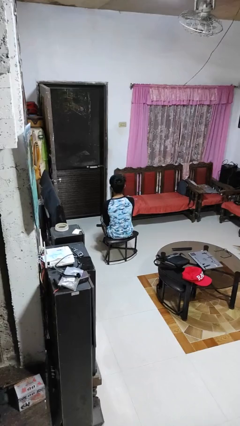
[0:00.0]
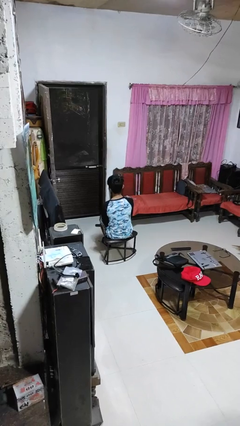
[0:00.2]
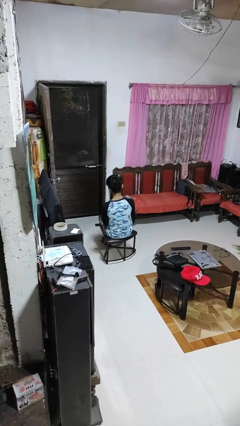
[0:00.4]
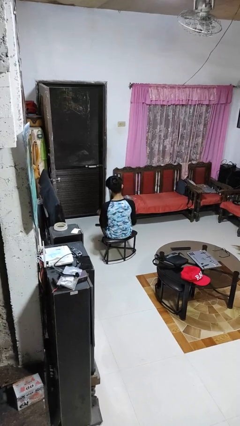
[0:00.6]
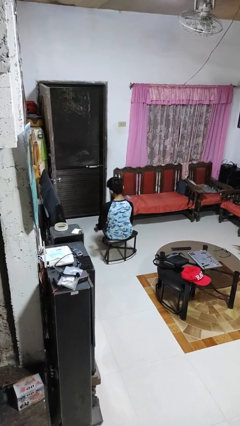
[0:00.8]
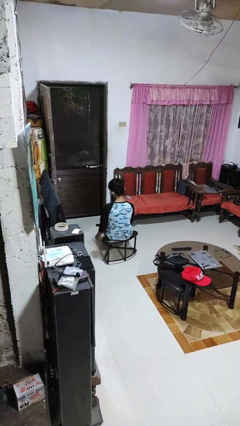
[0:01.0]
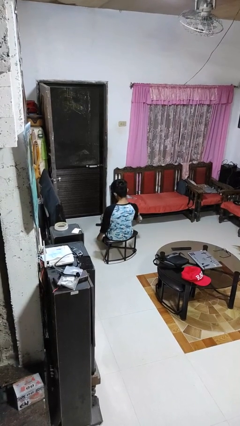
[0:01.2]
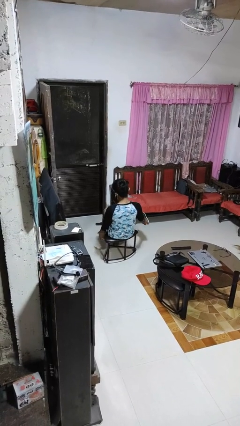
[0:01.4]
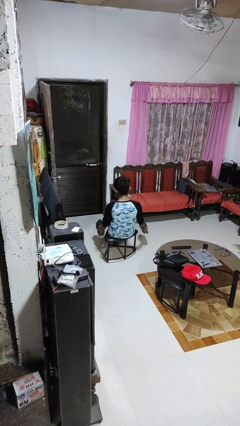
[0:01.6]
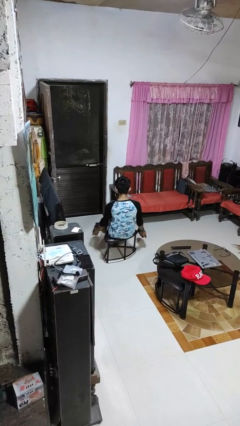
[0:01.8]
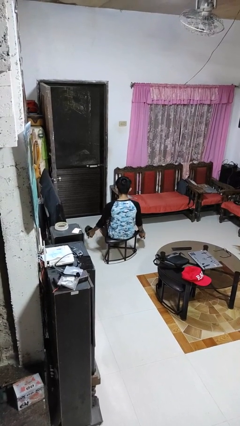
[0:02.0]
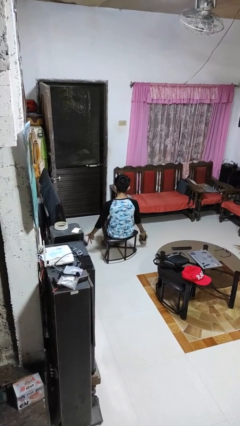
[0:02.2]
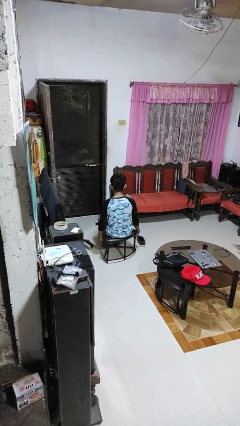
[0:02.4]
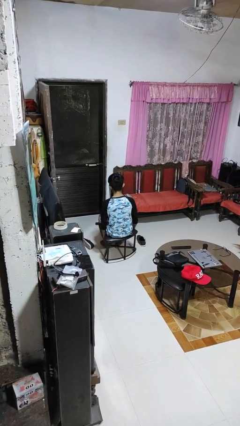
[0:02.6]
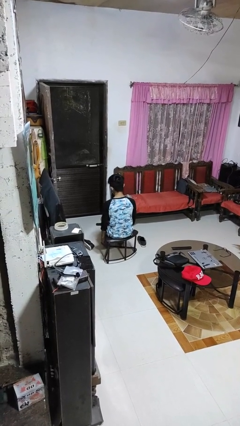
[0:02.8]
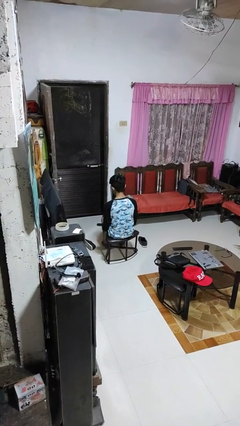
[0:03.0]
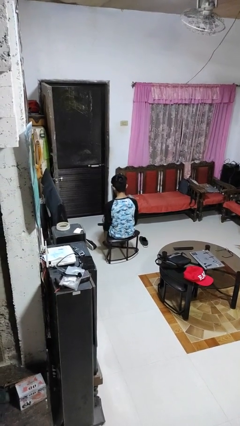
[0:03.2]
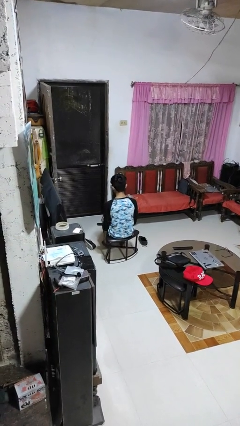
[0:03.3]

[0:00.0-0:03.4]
person takes off shoes

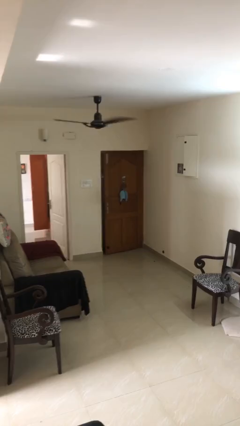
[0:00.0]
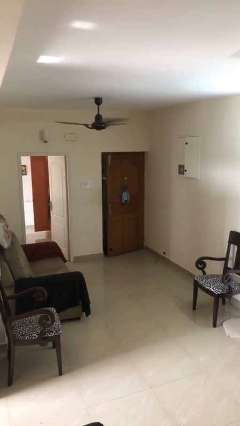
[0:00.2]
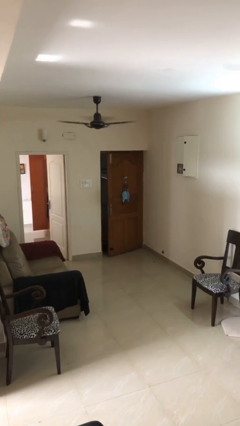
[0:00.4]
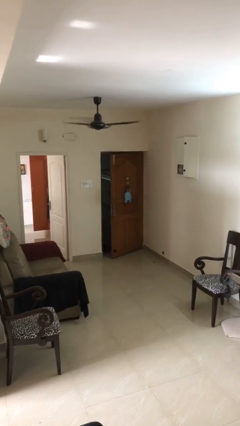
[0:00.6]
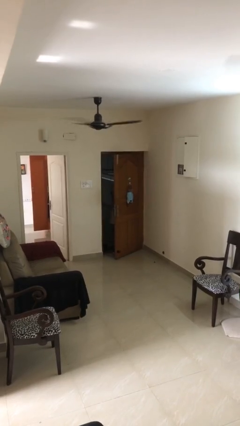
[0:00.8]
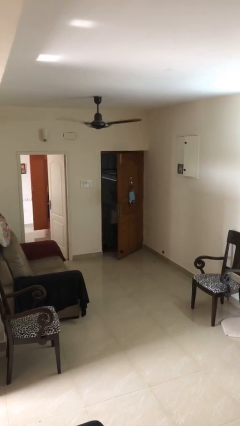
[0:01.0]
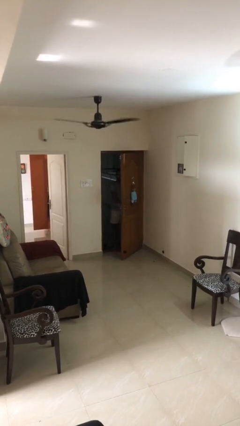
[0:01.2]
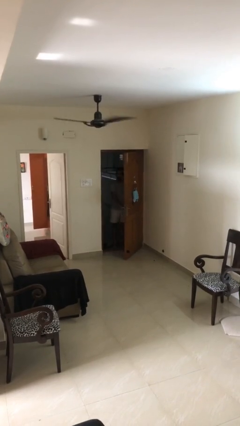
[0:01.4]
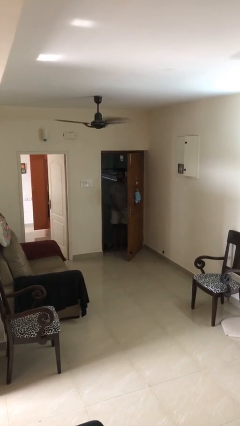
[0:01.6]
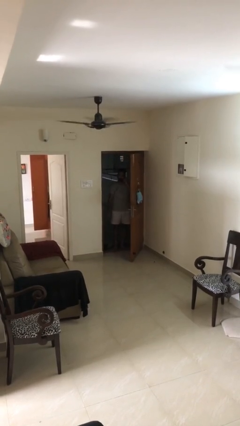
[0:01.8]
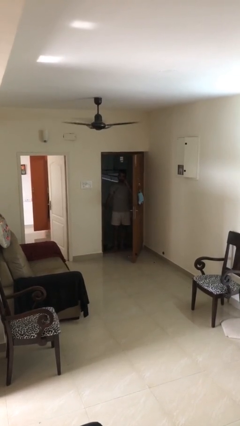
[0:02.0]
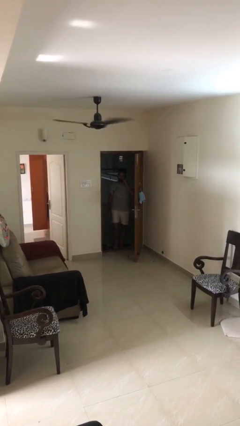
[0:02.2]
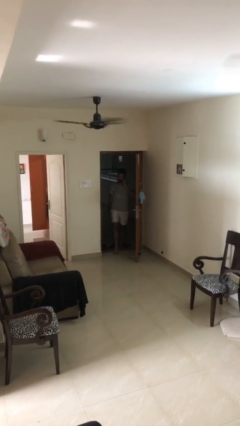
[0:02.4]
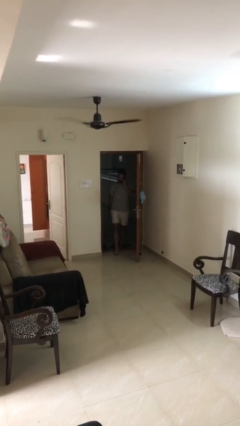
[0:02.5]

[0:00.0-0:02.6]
person opens facility door

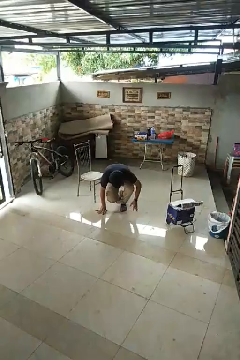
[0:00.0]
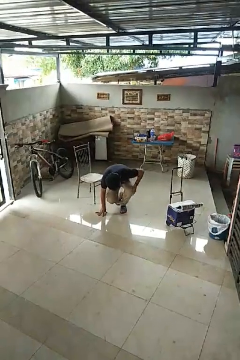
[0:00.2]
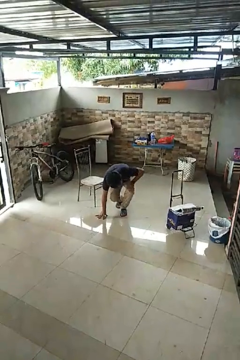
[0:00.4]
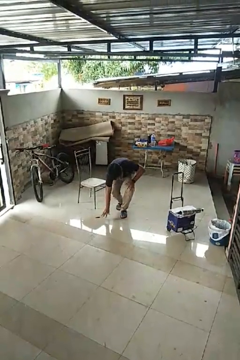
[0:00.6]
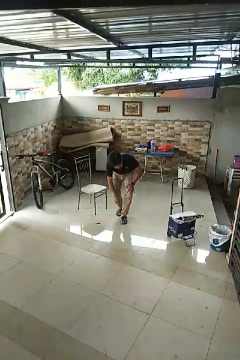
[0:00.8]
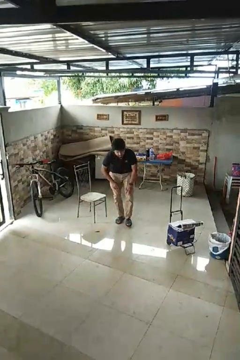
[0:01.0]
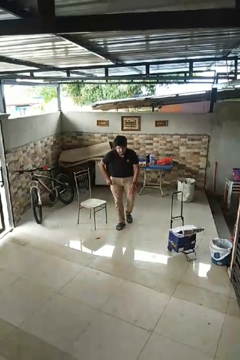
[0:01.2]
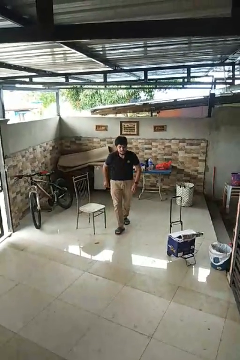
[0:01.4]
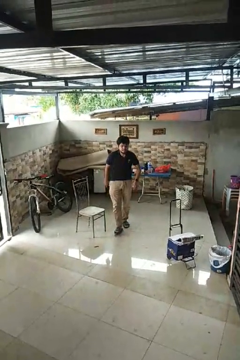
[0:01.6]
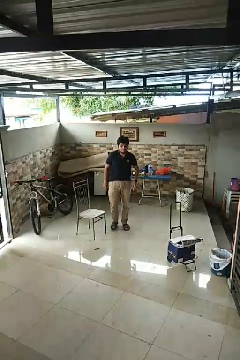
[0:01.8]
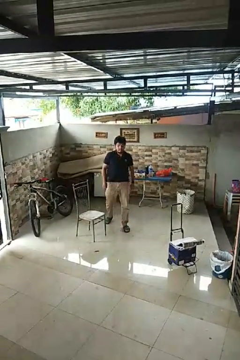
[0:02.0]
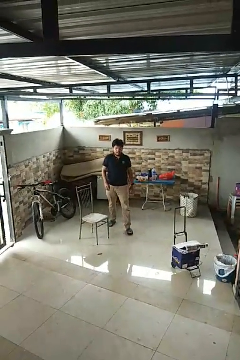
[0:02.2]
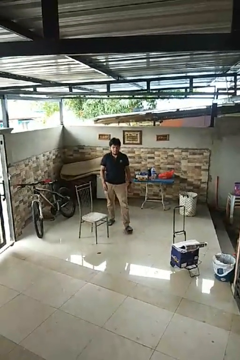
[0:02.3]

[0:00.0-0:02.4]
person stands up from floor

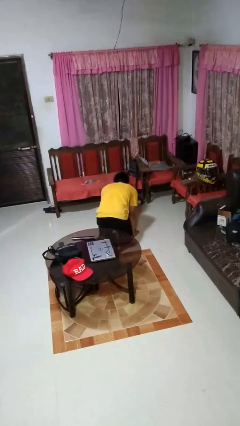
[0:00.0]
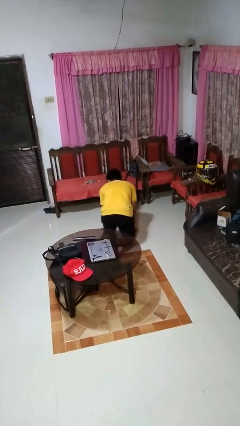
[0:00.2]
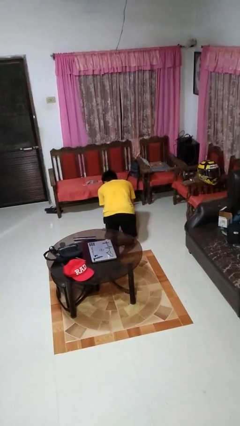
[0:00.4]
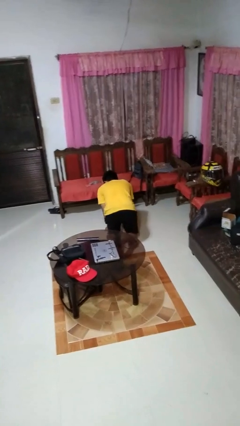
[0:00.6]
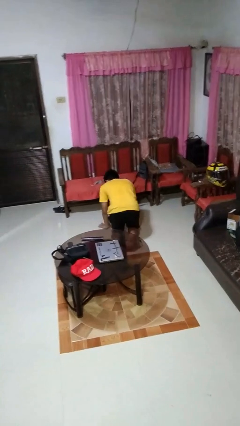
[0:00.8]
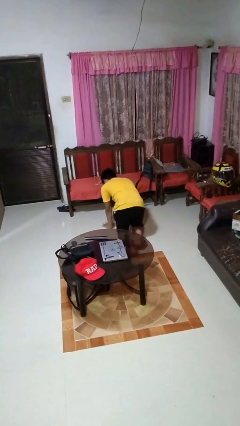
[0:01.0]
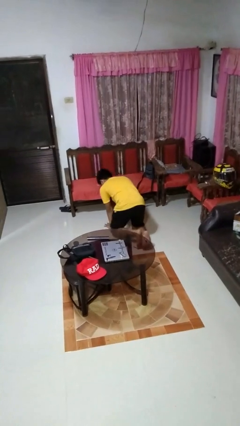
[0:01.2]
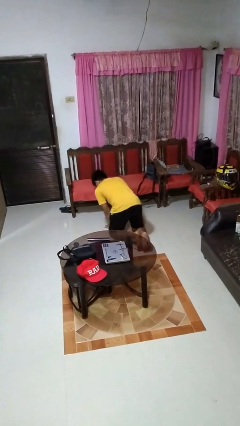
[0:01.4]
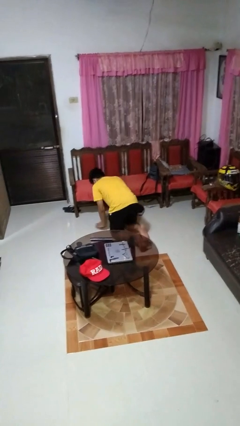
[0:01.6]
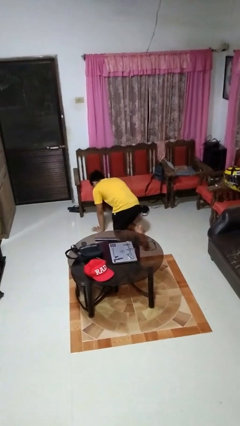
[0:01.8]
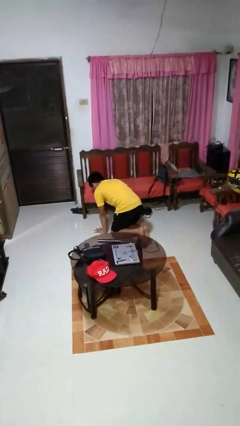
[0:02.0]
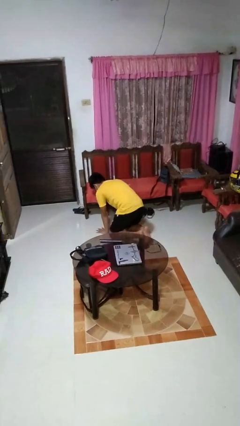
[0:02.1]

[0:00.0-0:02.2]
person crawls

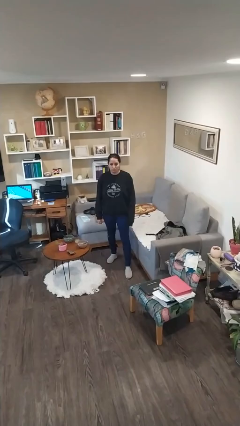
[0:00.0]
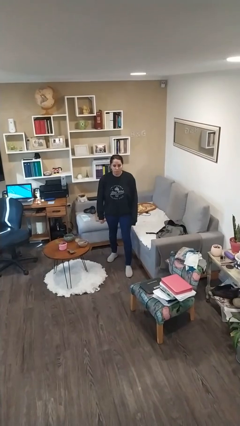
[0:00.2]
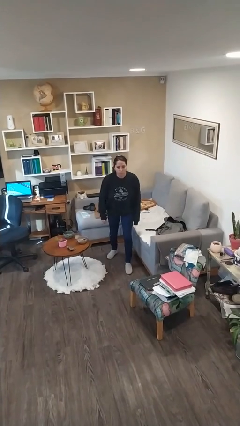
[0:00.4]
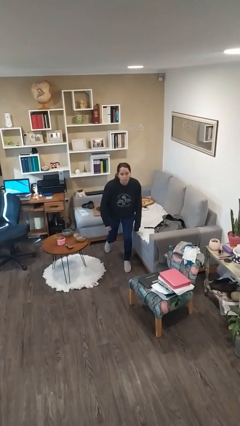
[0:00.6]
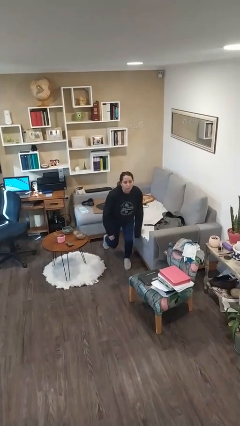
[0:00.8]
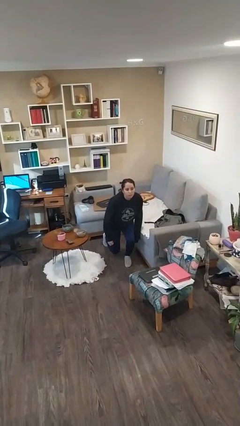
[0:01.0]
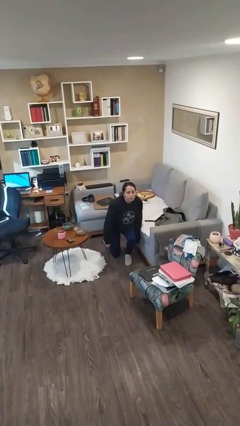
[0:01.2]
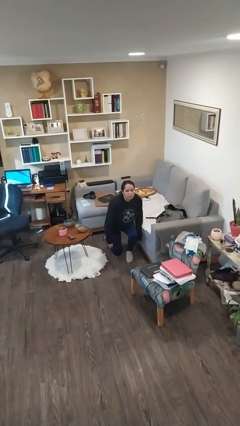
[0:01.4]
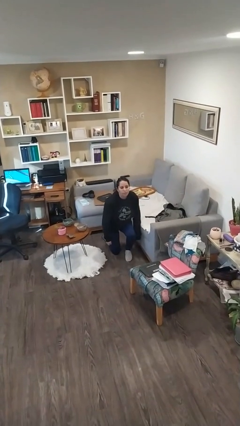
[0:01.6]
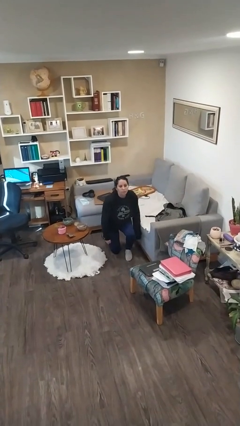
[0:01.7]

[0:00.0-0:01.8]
person kneels

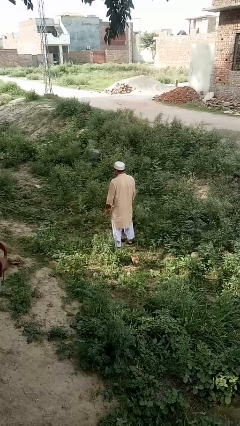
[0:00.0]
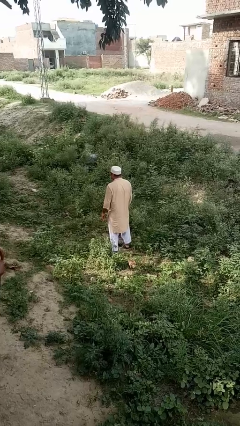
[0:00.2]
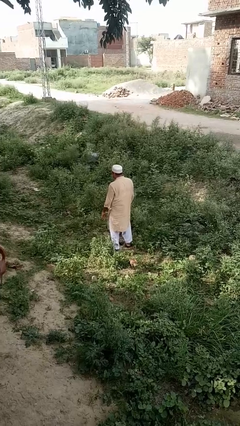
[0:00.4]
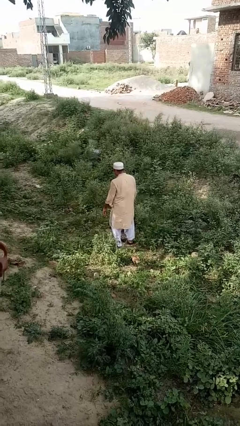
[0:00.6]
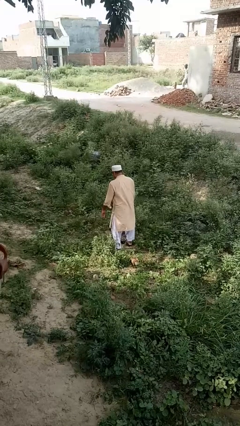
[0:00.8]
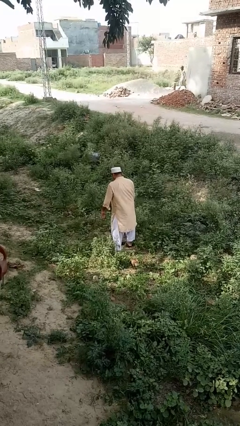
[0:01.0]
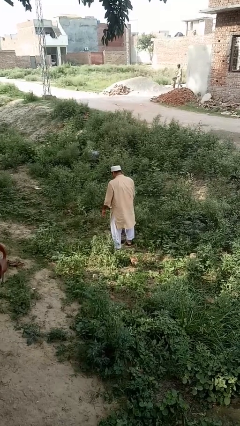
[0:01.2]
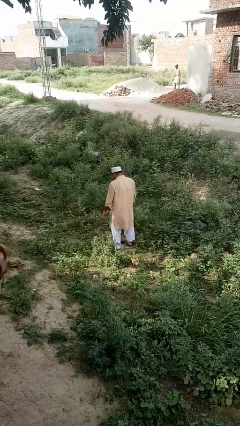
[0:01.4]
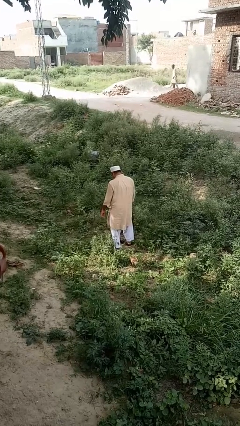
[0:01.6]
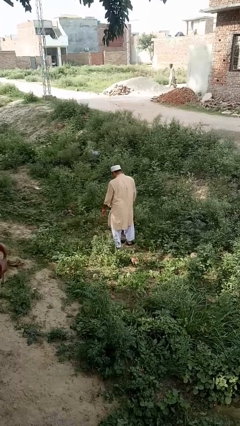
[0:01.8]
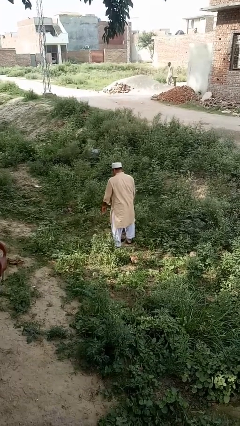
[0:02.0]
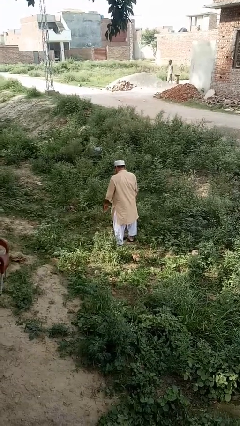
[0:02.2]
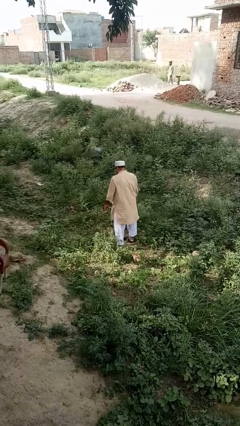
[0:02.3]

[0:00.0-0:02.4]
person wiggles hips

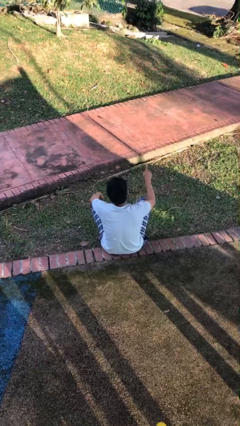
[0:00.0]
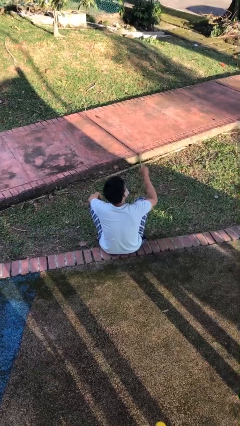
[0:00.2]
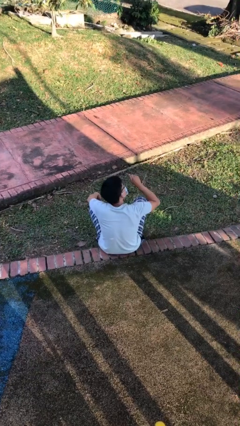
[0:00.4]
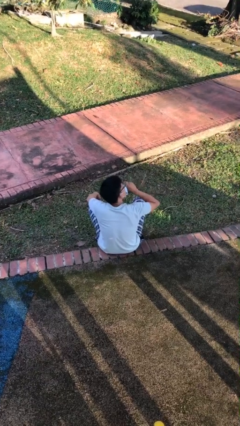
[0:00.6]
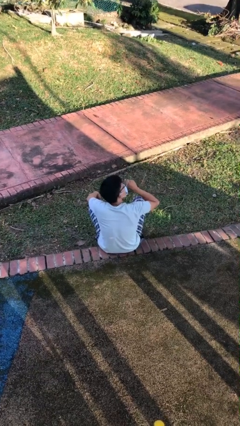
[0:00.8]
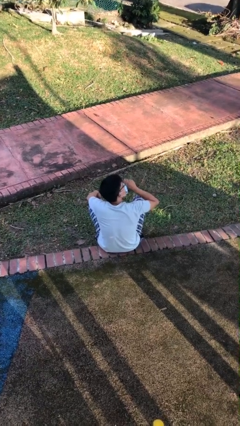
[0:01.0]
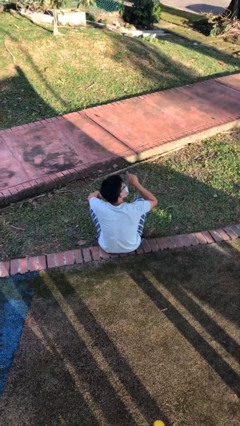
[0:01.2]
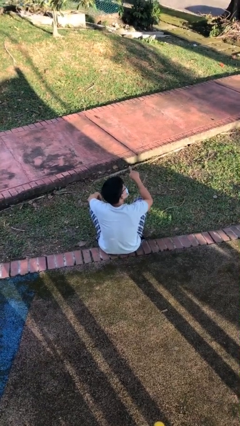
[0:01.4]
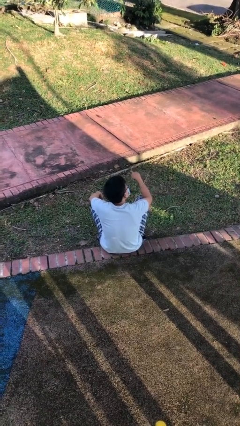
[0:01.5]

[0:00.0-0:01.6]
person gestures be quiet

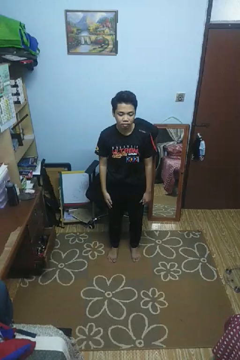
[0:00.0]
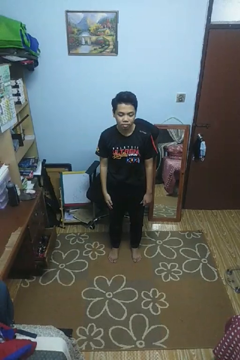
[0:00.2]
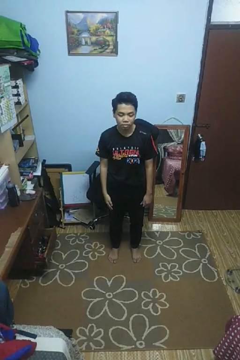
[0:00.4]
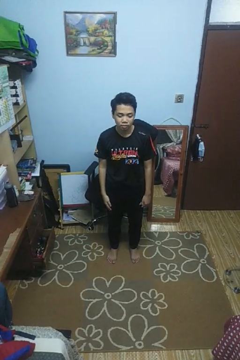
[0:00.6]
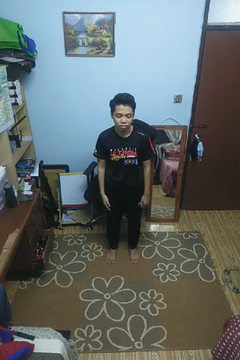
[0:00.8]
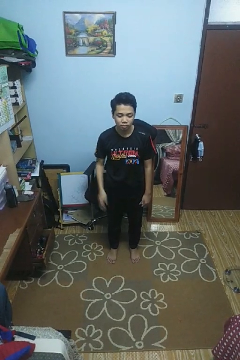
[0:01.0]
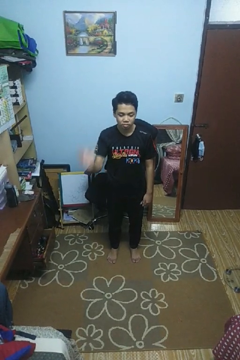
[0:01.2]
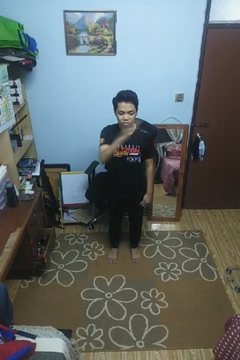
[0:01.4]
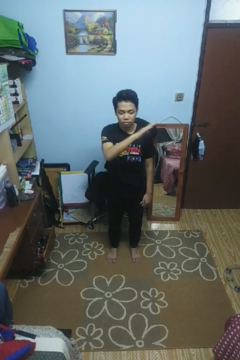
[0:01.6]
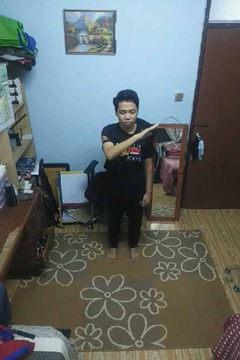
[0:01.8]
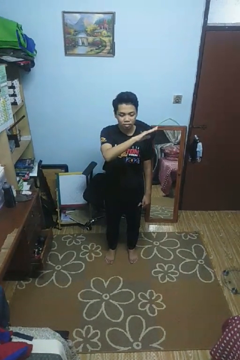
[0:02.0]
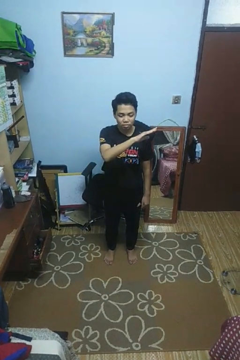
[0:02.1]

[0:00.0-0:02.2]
person gestures swipe left
